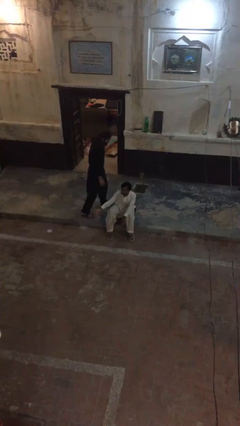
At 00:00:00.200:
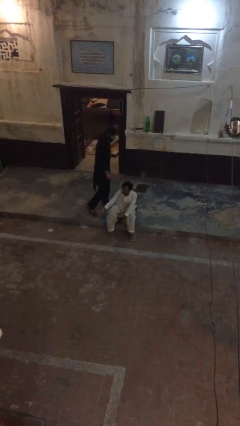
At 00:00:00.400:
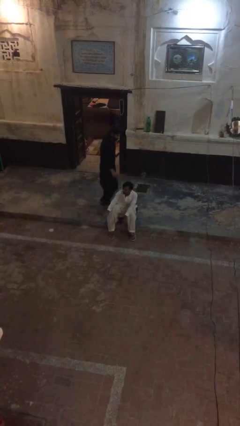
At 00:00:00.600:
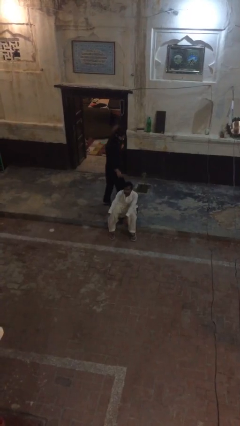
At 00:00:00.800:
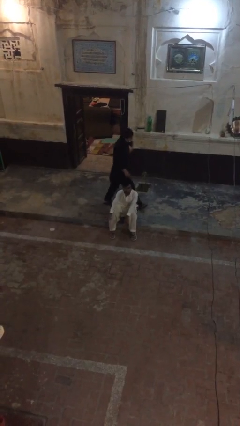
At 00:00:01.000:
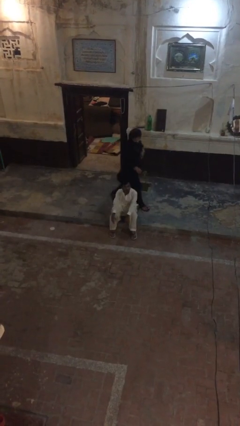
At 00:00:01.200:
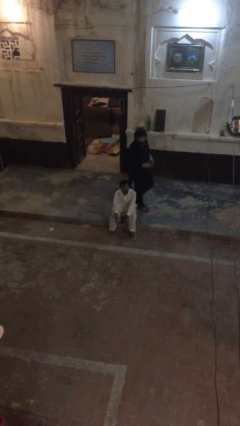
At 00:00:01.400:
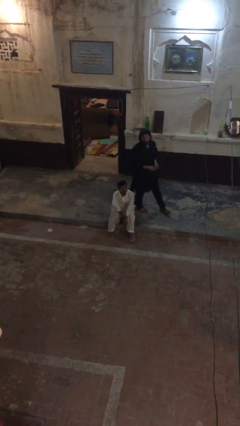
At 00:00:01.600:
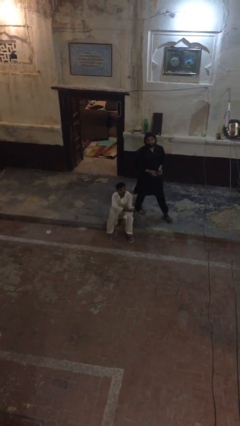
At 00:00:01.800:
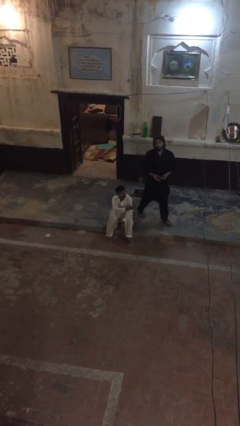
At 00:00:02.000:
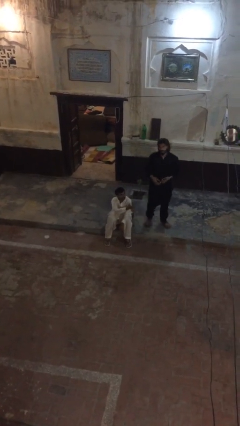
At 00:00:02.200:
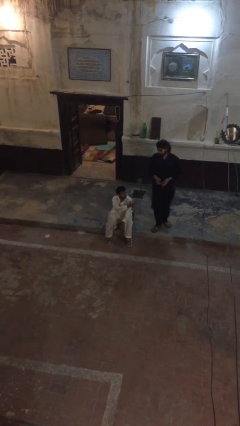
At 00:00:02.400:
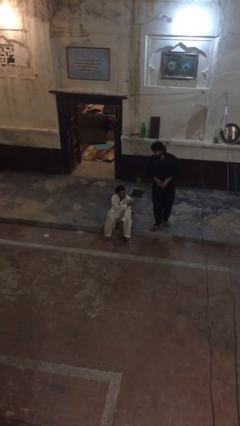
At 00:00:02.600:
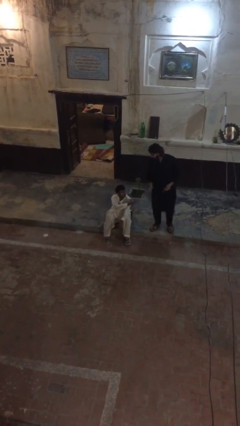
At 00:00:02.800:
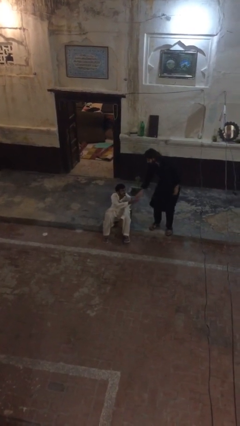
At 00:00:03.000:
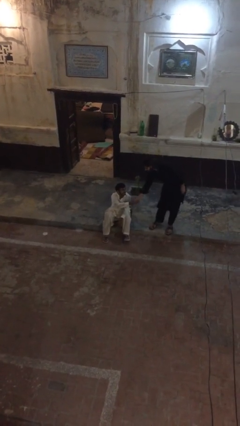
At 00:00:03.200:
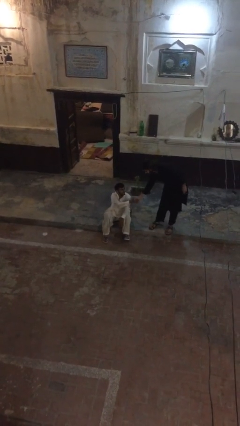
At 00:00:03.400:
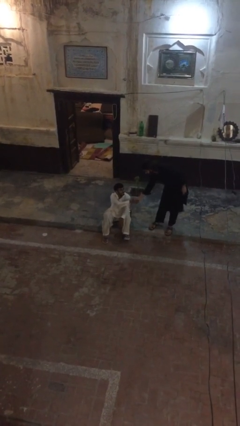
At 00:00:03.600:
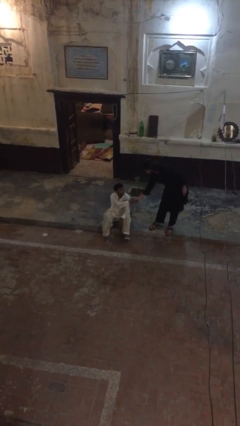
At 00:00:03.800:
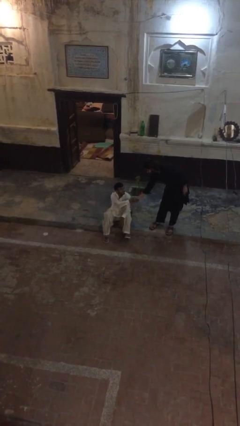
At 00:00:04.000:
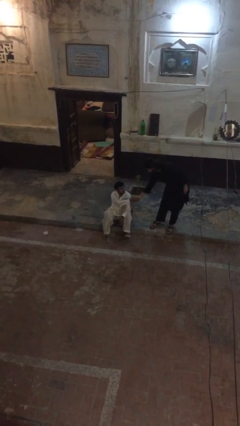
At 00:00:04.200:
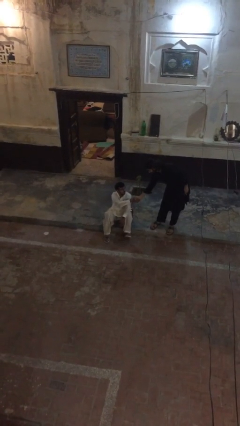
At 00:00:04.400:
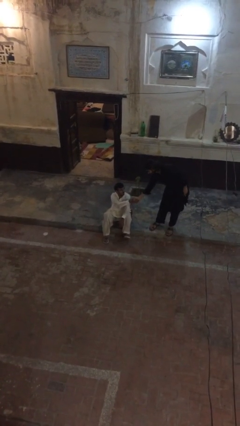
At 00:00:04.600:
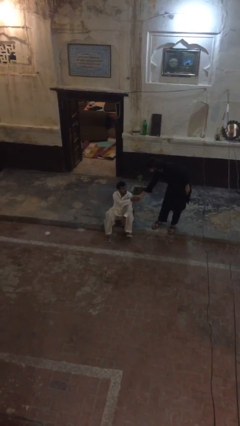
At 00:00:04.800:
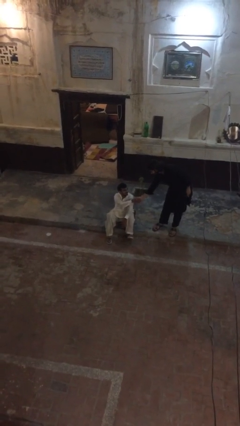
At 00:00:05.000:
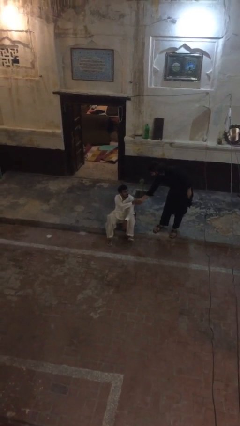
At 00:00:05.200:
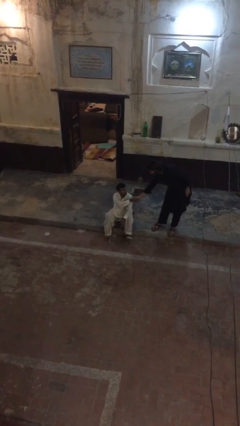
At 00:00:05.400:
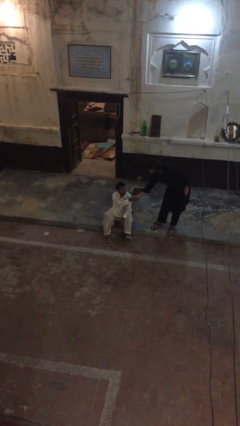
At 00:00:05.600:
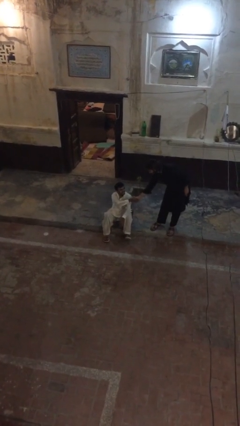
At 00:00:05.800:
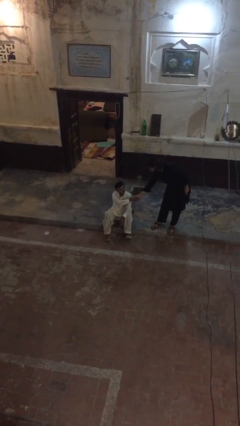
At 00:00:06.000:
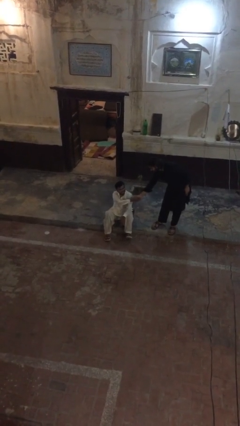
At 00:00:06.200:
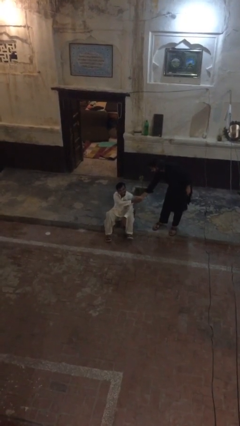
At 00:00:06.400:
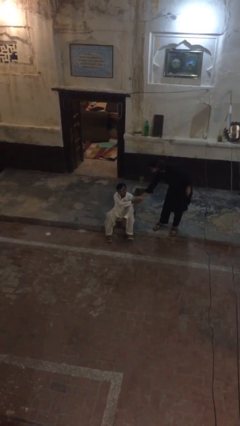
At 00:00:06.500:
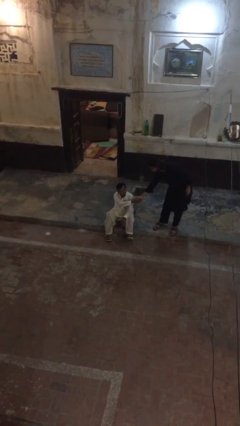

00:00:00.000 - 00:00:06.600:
person shakes hand

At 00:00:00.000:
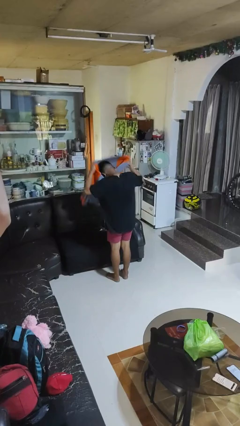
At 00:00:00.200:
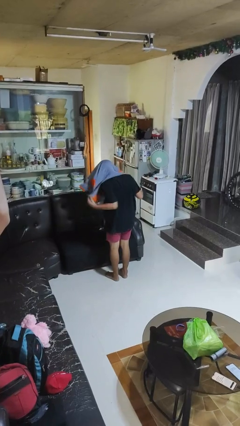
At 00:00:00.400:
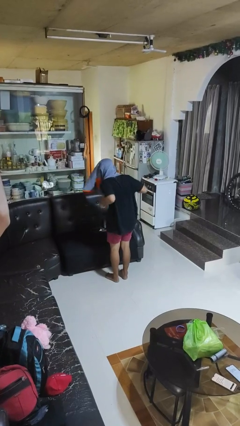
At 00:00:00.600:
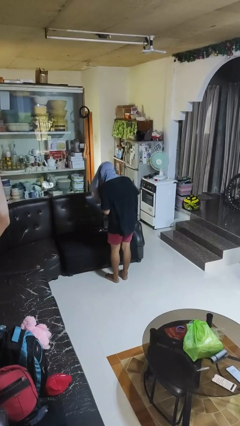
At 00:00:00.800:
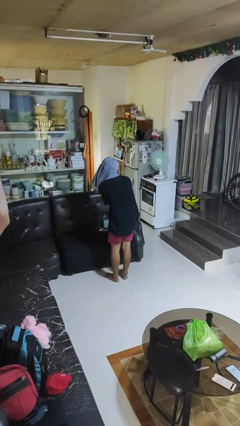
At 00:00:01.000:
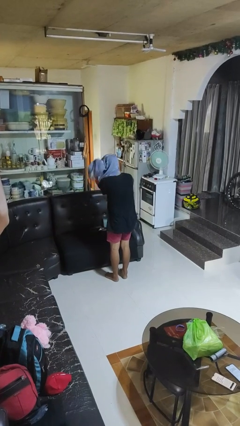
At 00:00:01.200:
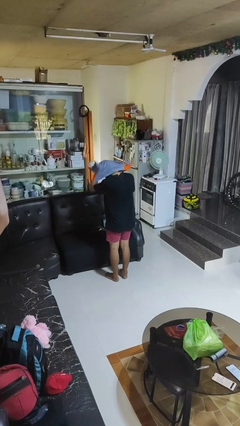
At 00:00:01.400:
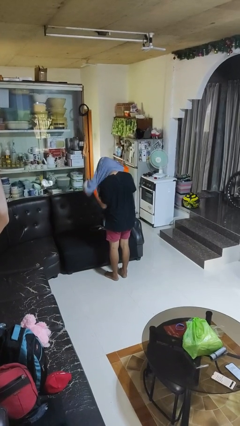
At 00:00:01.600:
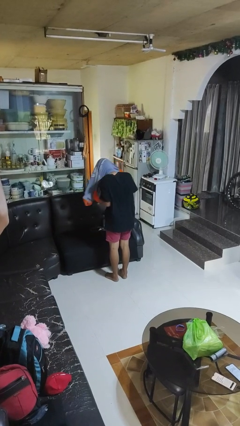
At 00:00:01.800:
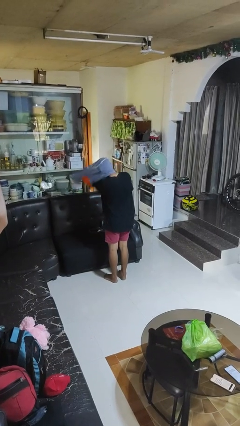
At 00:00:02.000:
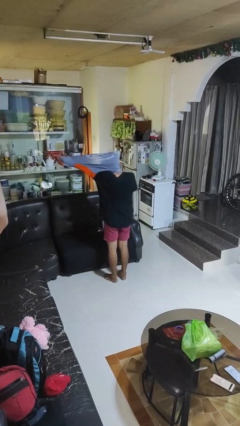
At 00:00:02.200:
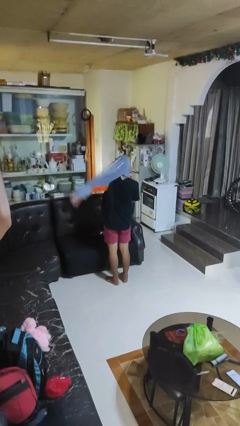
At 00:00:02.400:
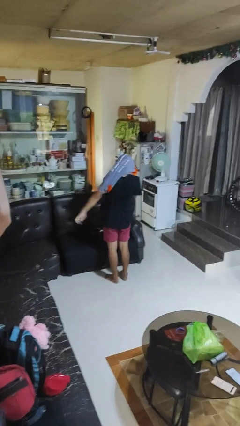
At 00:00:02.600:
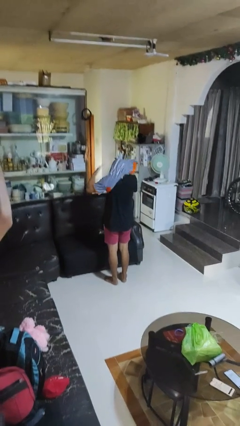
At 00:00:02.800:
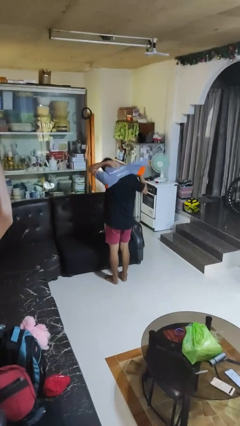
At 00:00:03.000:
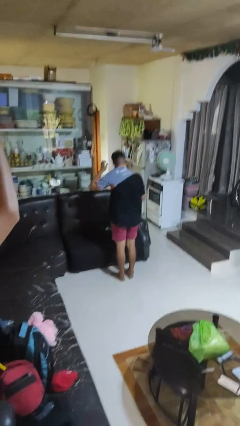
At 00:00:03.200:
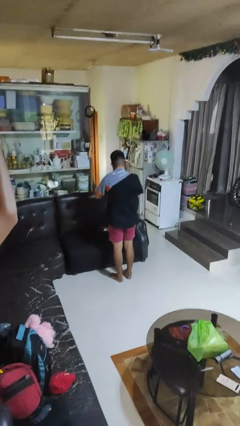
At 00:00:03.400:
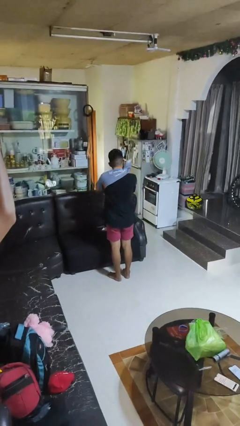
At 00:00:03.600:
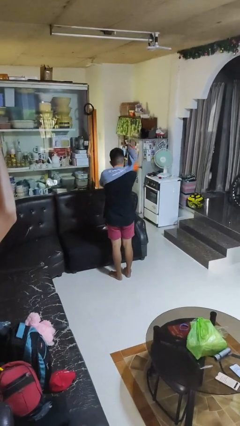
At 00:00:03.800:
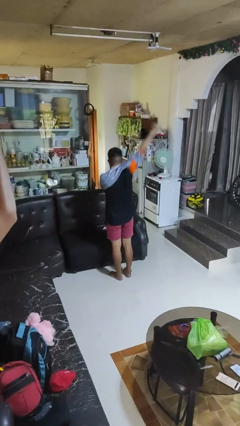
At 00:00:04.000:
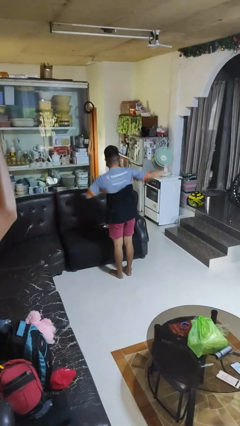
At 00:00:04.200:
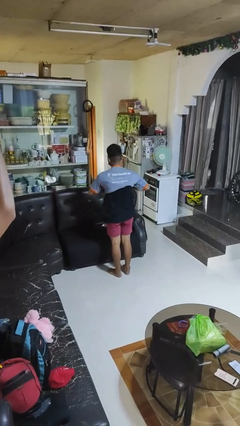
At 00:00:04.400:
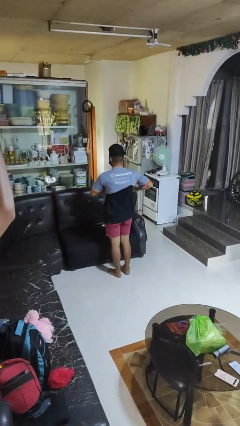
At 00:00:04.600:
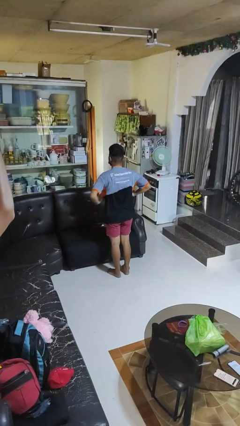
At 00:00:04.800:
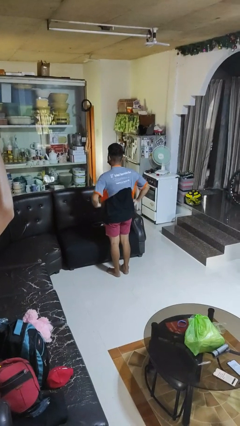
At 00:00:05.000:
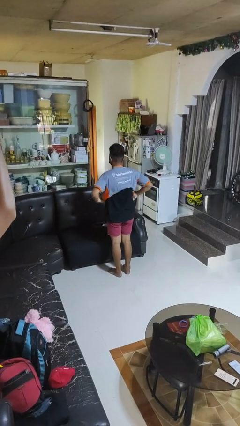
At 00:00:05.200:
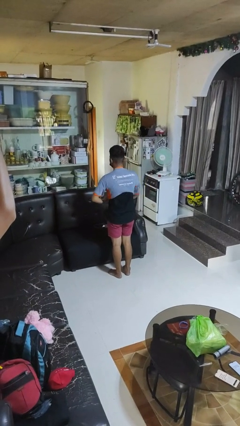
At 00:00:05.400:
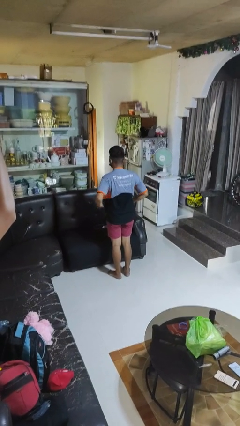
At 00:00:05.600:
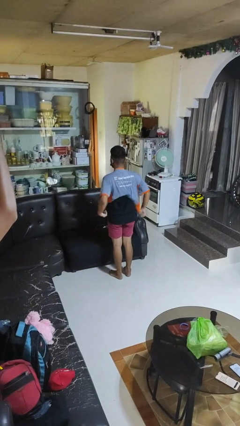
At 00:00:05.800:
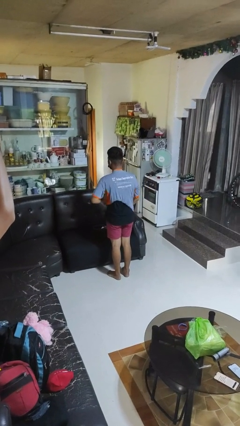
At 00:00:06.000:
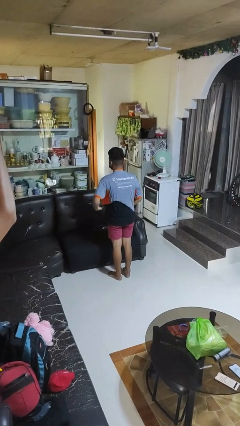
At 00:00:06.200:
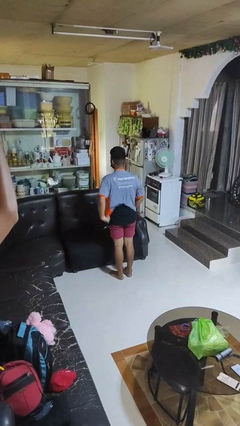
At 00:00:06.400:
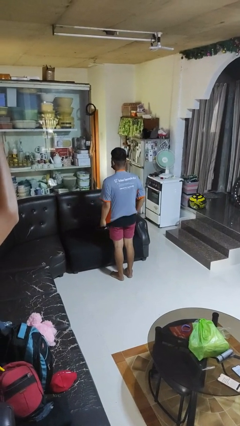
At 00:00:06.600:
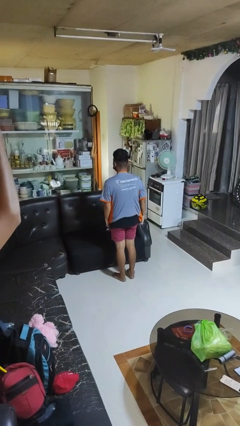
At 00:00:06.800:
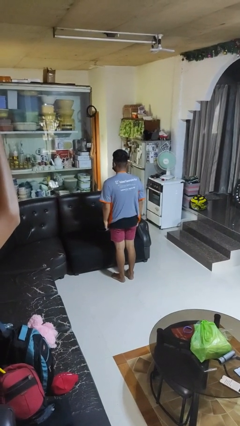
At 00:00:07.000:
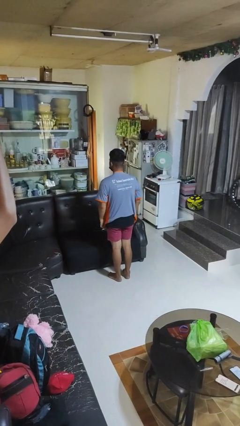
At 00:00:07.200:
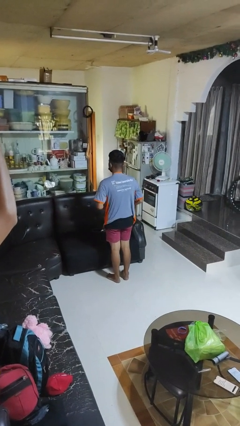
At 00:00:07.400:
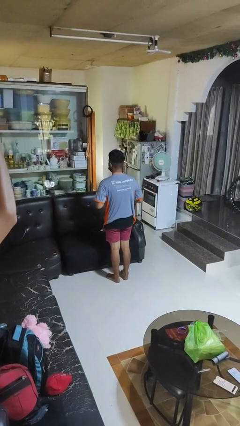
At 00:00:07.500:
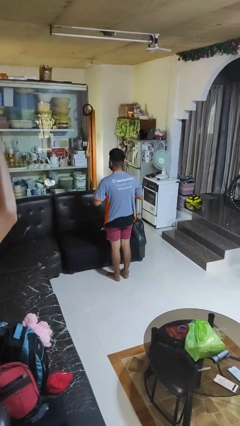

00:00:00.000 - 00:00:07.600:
person puts on shirt

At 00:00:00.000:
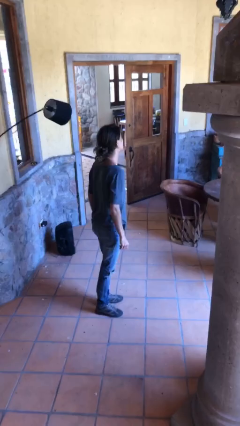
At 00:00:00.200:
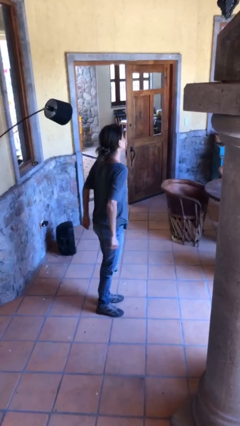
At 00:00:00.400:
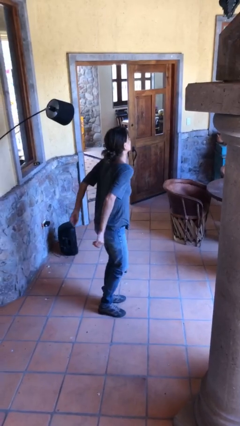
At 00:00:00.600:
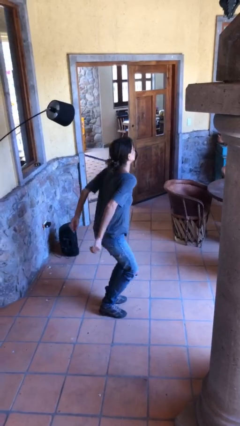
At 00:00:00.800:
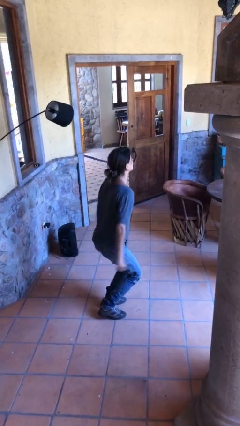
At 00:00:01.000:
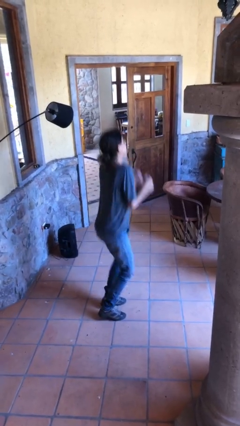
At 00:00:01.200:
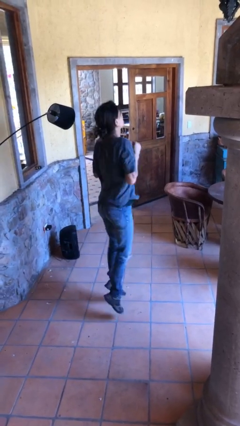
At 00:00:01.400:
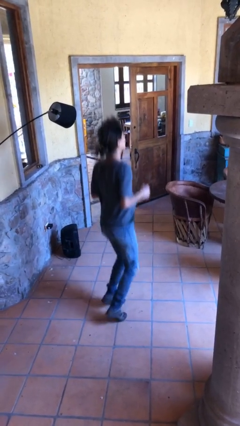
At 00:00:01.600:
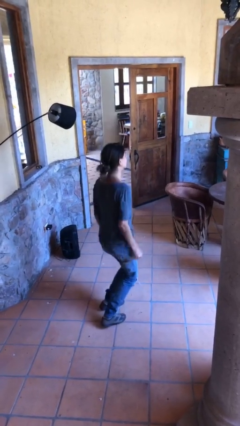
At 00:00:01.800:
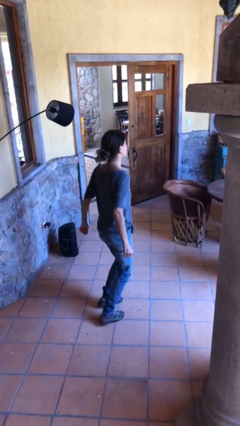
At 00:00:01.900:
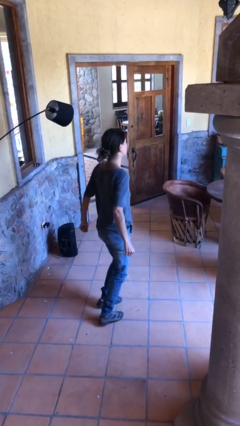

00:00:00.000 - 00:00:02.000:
person jumps

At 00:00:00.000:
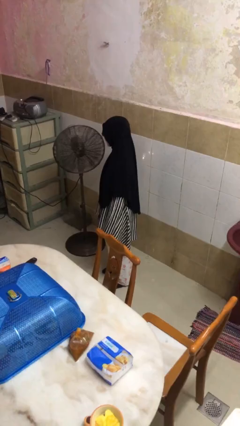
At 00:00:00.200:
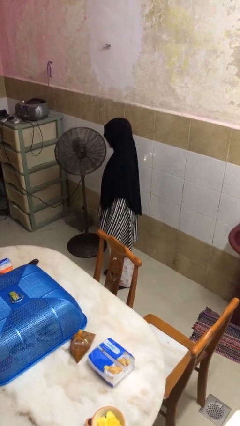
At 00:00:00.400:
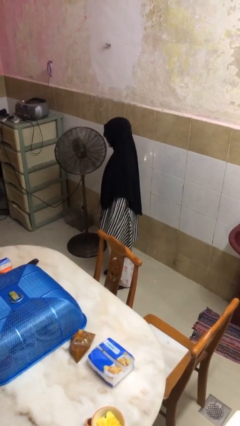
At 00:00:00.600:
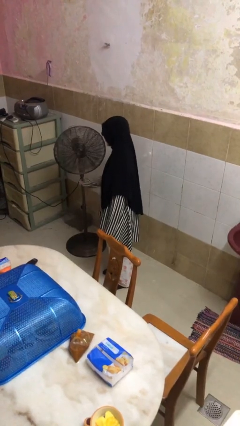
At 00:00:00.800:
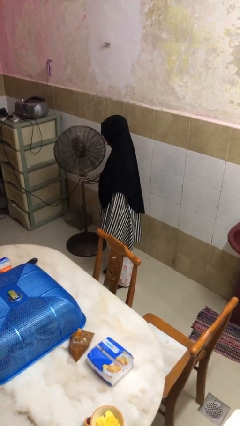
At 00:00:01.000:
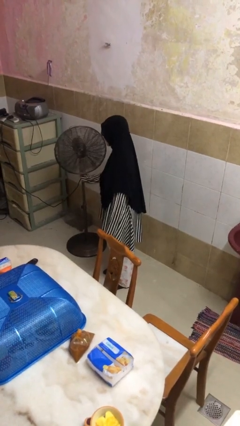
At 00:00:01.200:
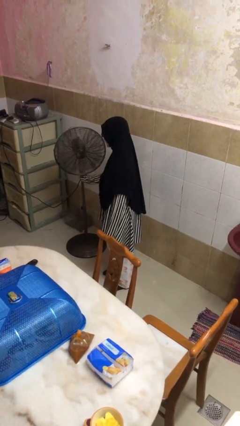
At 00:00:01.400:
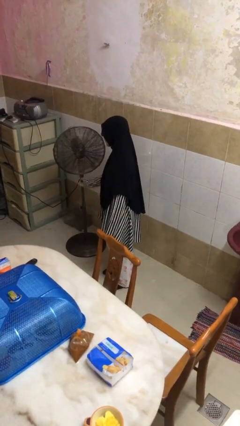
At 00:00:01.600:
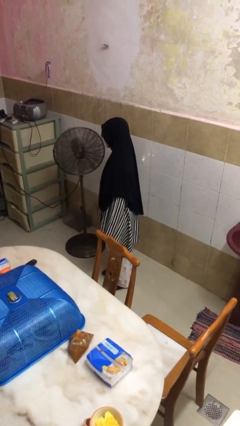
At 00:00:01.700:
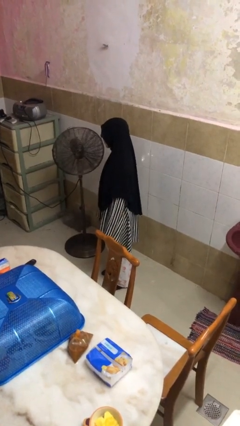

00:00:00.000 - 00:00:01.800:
person turns off fan
